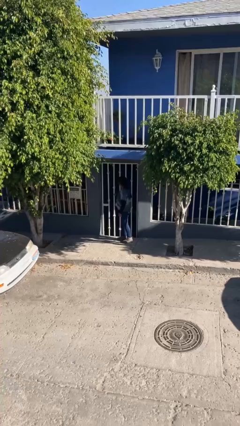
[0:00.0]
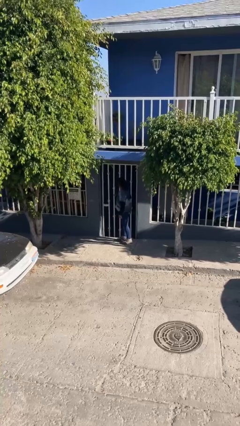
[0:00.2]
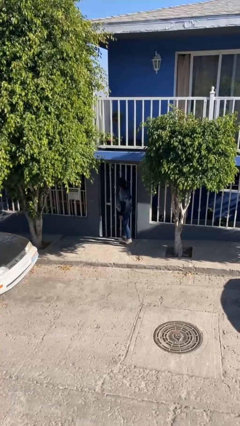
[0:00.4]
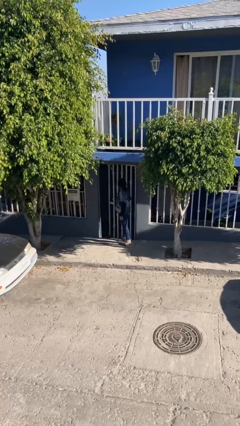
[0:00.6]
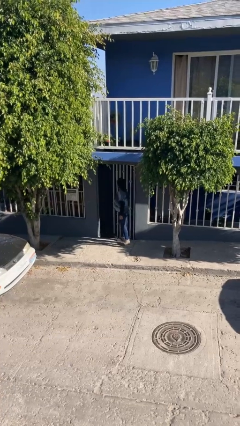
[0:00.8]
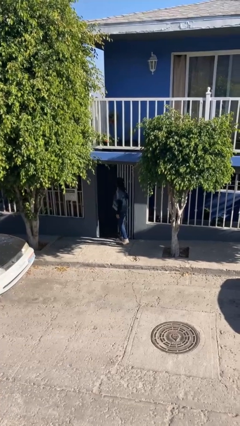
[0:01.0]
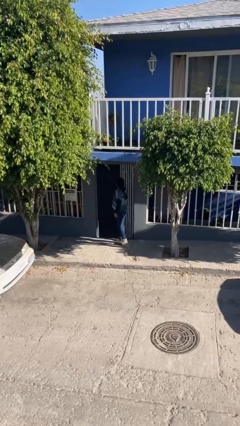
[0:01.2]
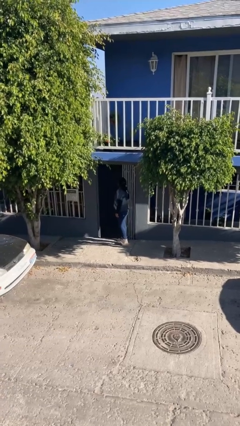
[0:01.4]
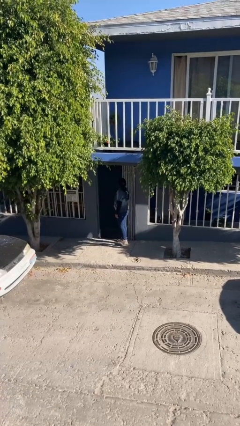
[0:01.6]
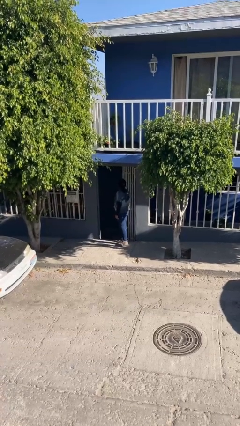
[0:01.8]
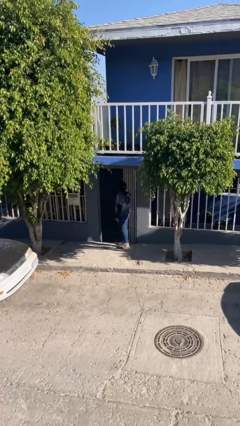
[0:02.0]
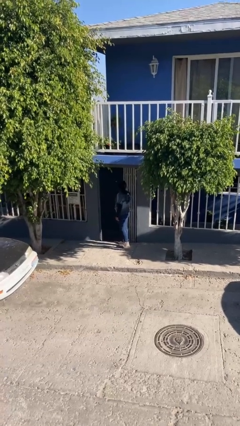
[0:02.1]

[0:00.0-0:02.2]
person opens facility door

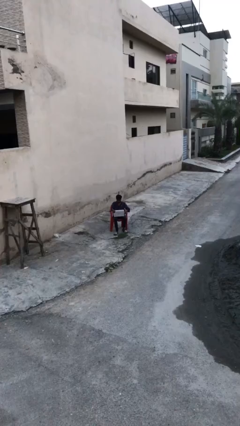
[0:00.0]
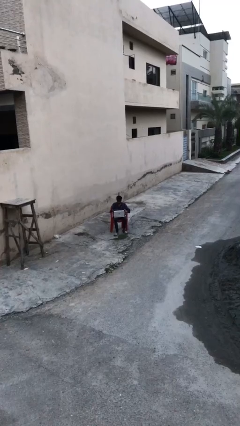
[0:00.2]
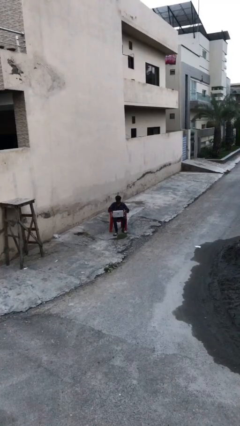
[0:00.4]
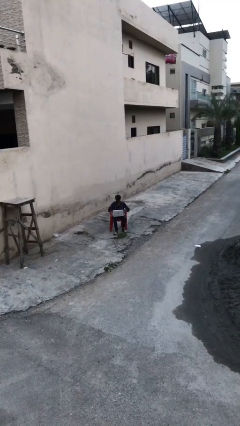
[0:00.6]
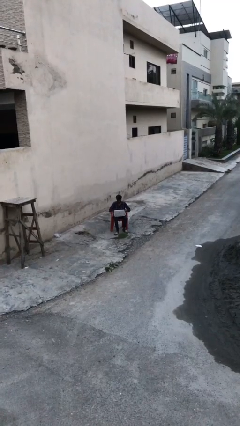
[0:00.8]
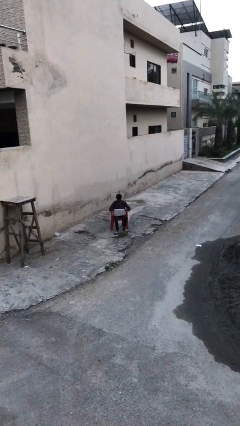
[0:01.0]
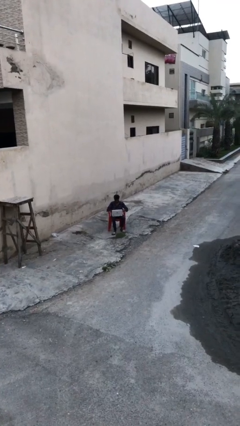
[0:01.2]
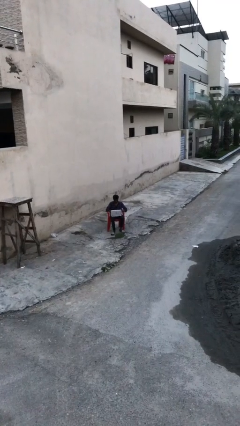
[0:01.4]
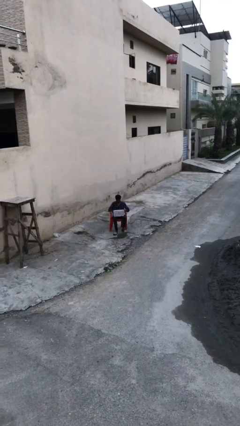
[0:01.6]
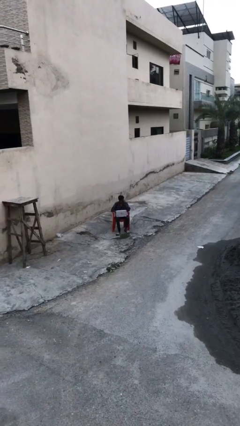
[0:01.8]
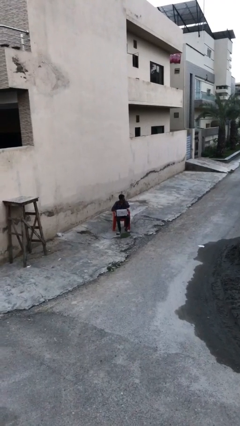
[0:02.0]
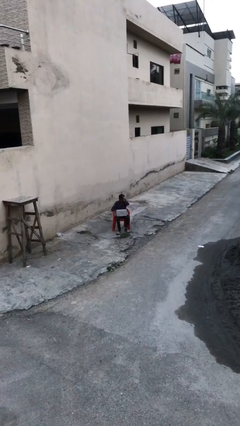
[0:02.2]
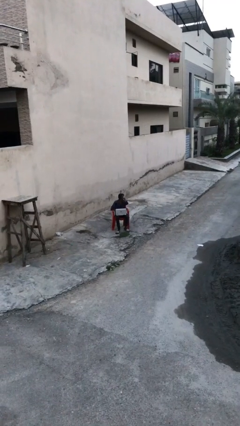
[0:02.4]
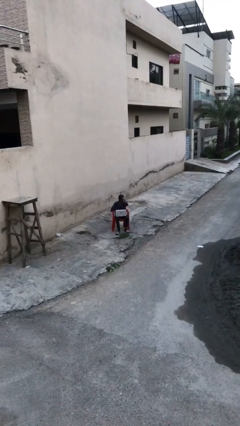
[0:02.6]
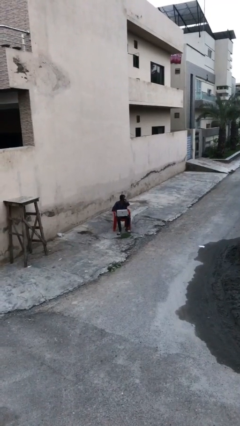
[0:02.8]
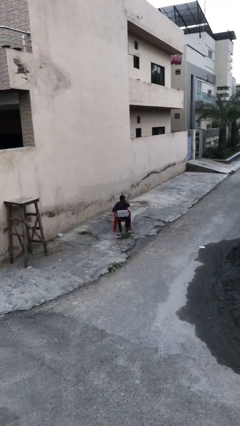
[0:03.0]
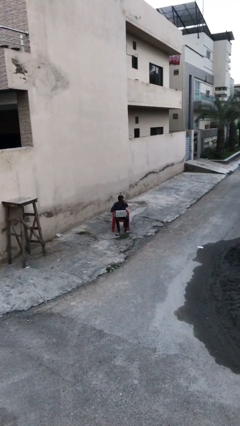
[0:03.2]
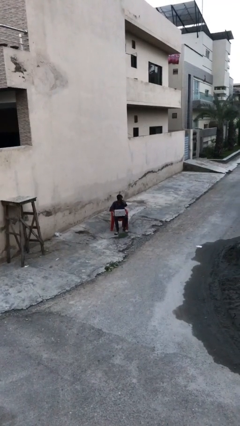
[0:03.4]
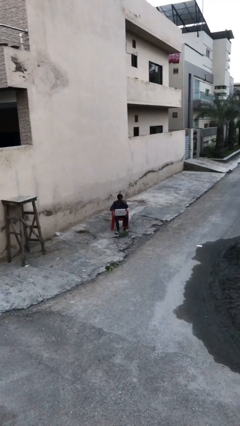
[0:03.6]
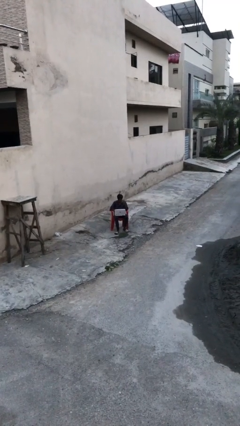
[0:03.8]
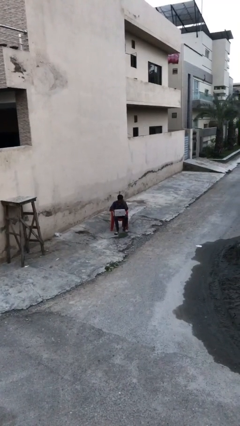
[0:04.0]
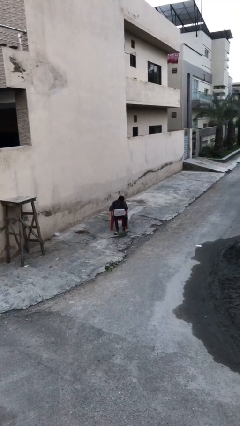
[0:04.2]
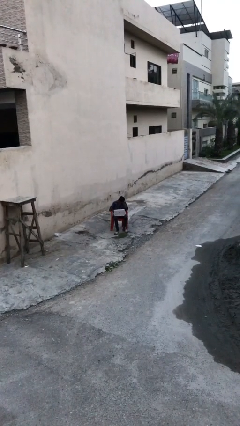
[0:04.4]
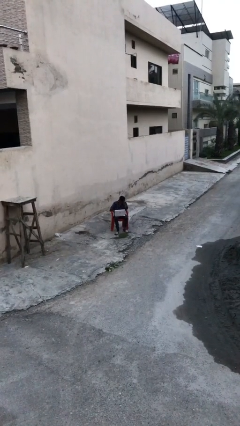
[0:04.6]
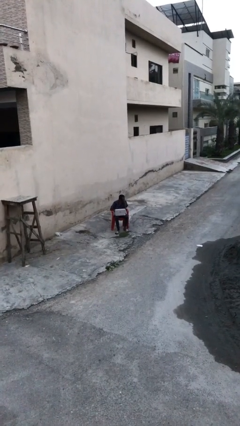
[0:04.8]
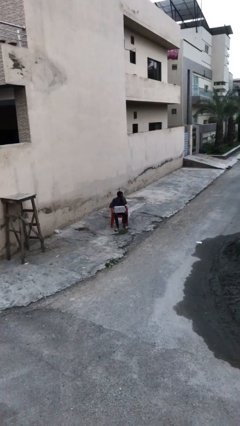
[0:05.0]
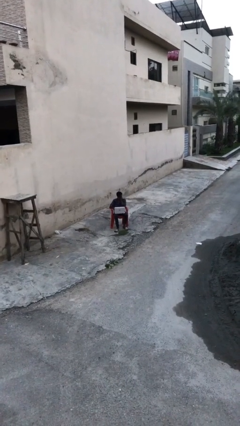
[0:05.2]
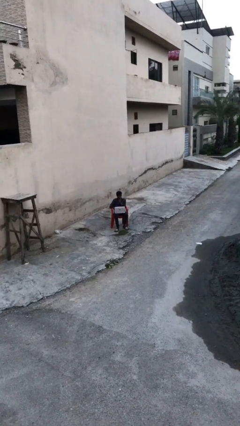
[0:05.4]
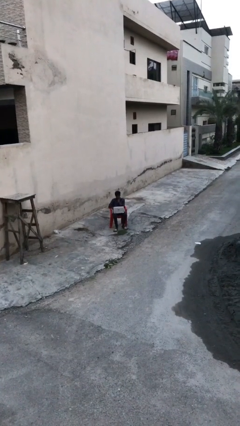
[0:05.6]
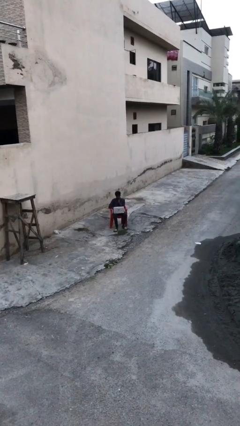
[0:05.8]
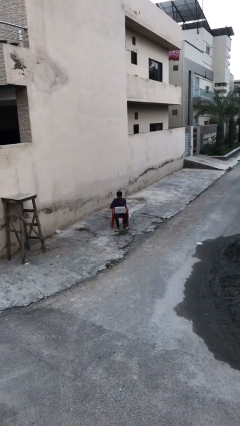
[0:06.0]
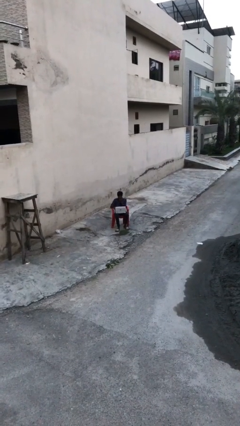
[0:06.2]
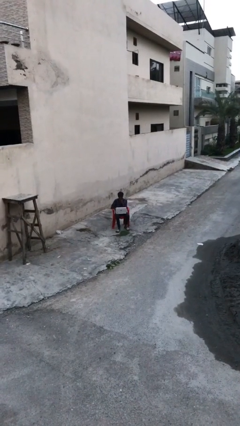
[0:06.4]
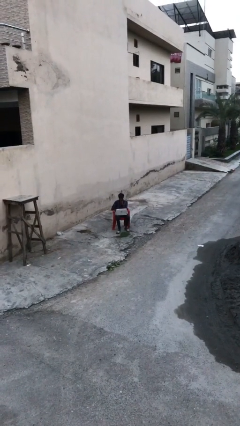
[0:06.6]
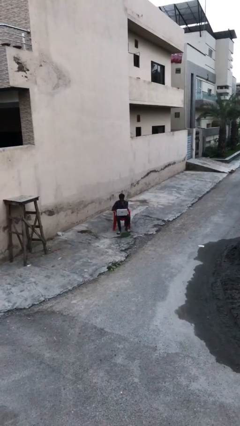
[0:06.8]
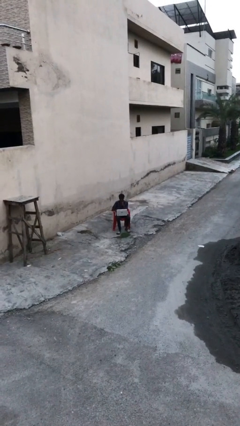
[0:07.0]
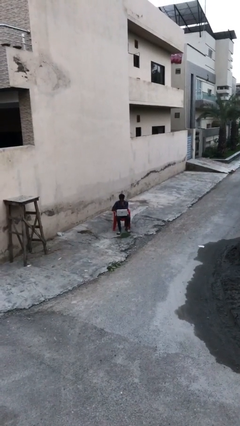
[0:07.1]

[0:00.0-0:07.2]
person interacts with laptop

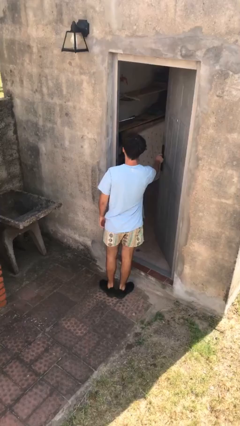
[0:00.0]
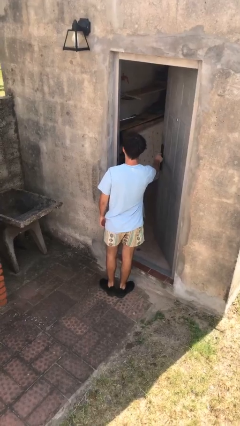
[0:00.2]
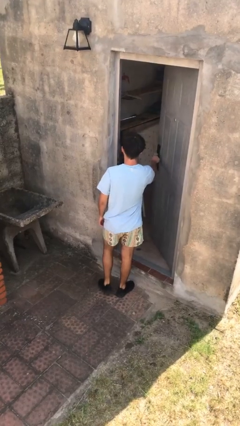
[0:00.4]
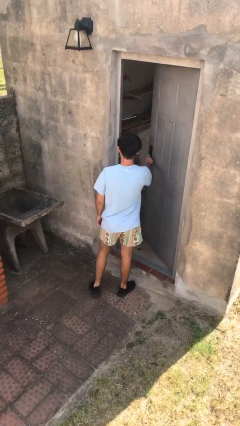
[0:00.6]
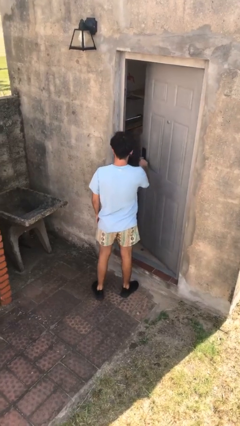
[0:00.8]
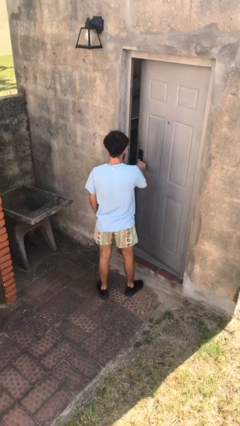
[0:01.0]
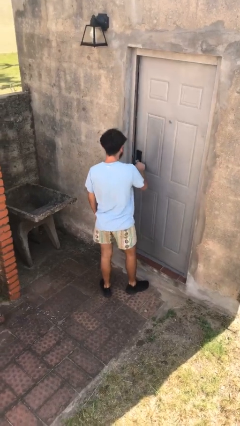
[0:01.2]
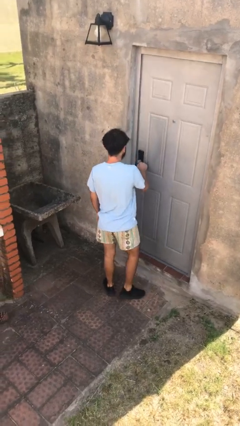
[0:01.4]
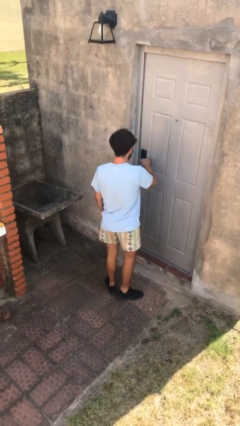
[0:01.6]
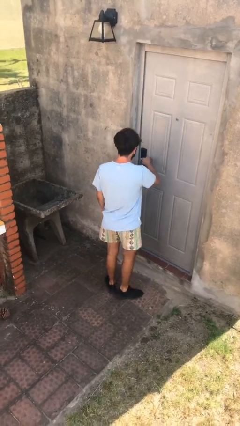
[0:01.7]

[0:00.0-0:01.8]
person closes facility door

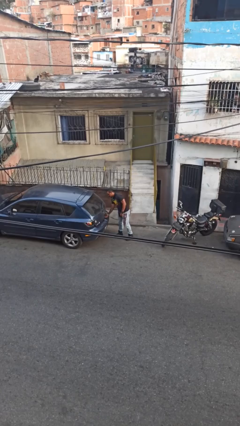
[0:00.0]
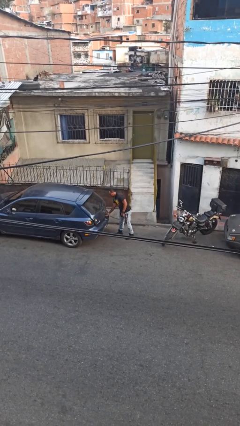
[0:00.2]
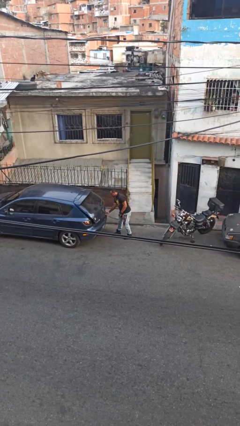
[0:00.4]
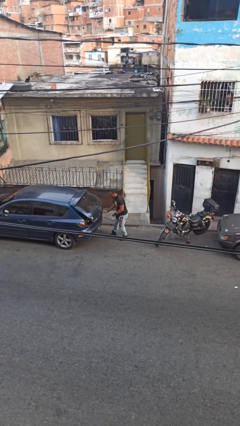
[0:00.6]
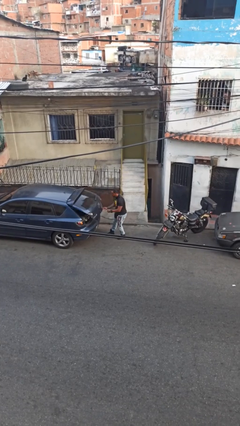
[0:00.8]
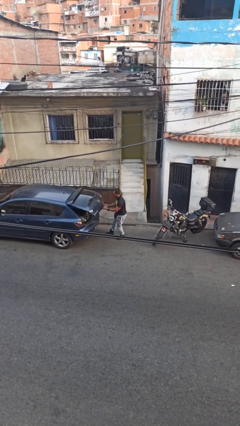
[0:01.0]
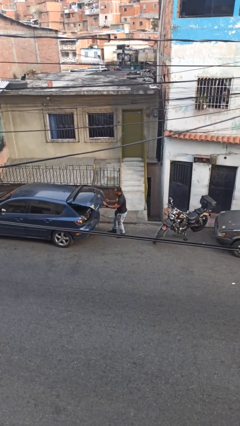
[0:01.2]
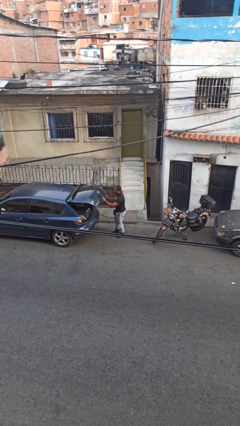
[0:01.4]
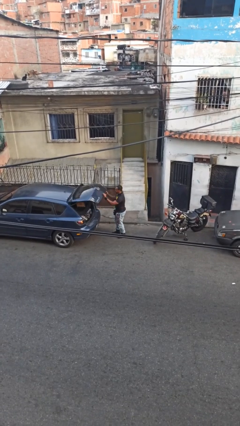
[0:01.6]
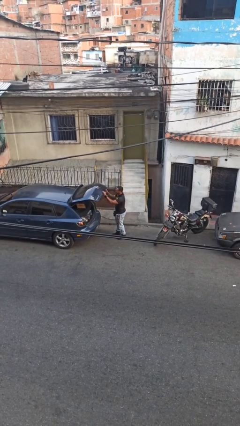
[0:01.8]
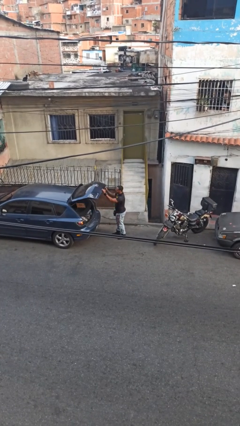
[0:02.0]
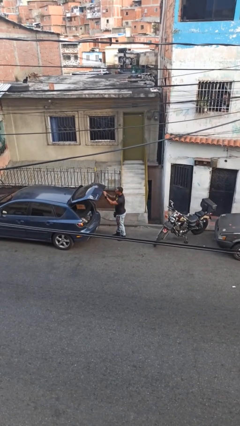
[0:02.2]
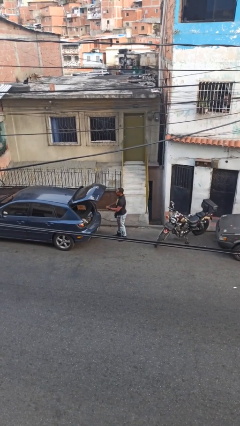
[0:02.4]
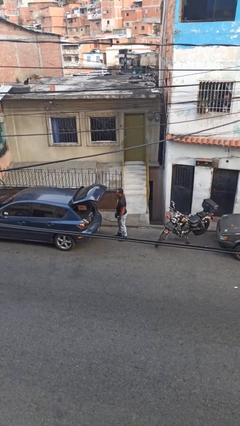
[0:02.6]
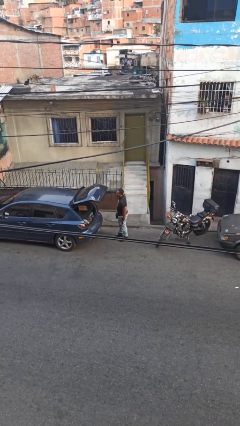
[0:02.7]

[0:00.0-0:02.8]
person opens car trunk

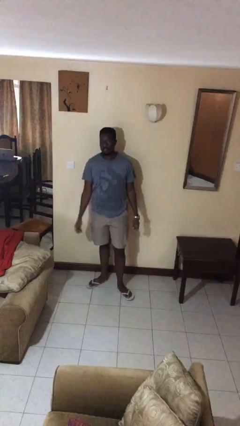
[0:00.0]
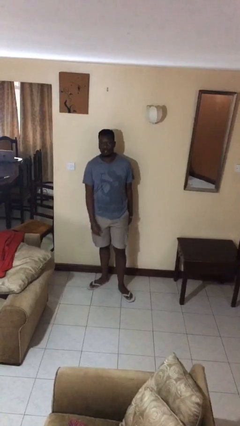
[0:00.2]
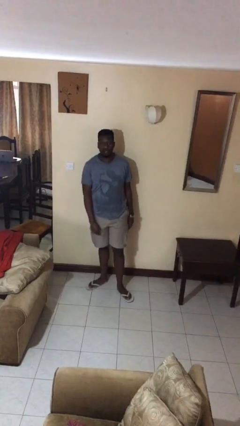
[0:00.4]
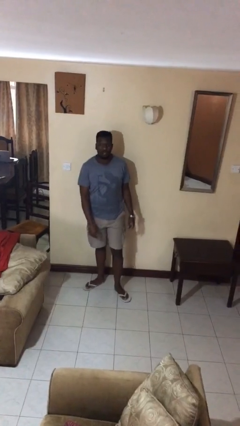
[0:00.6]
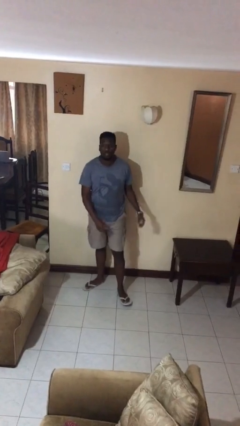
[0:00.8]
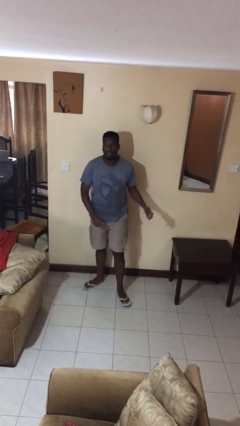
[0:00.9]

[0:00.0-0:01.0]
person dances in place

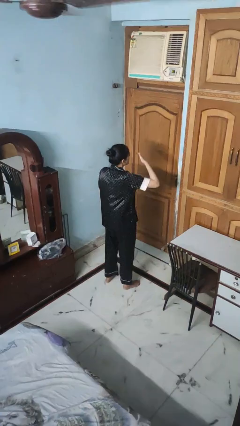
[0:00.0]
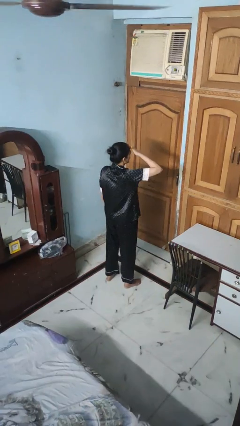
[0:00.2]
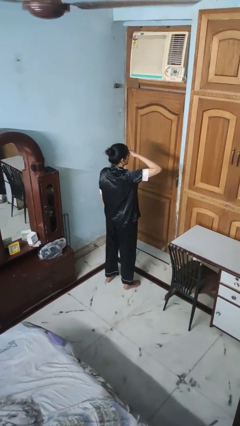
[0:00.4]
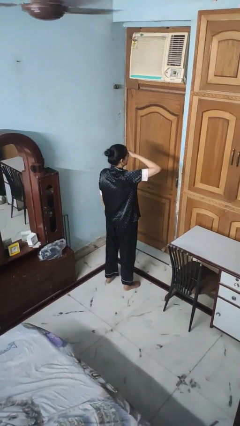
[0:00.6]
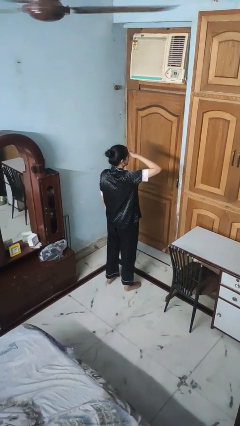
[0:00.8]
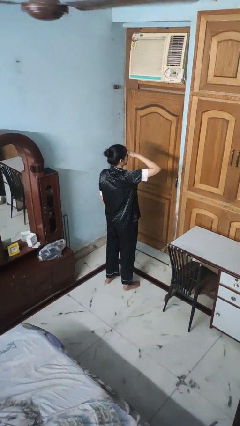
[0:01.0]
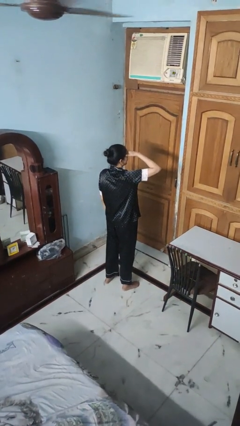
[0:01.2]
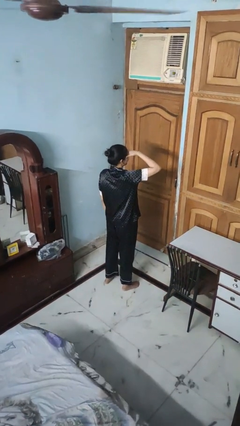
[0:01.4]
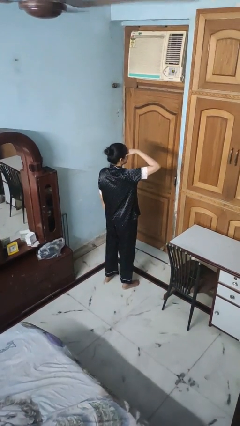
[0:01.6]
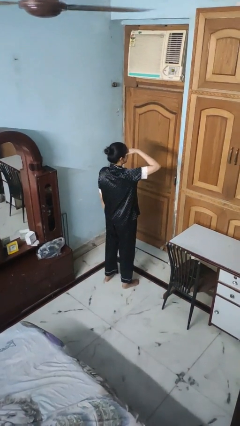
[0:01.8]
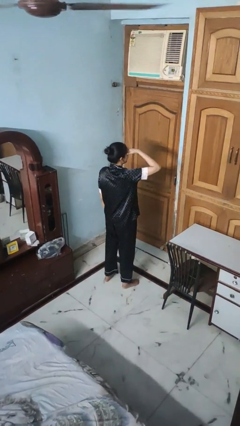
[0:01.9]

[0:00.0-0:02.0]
person shades eyes

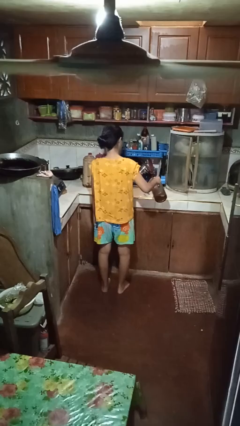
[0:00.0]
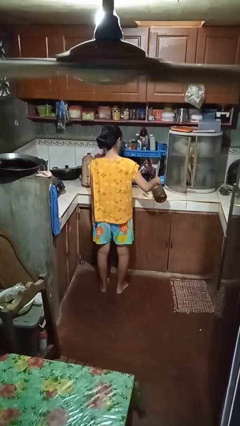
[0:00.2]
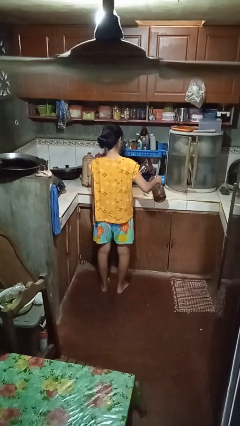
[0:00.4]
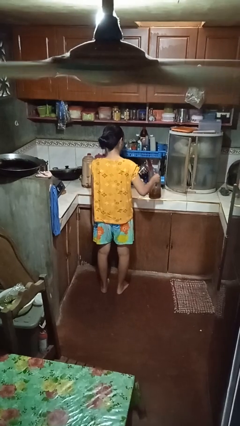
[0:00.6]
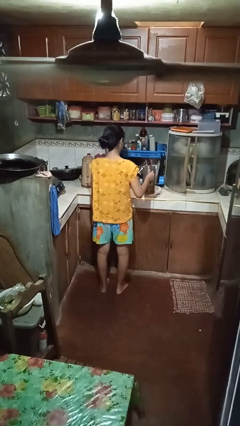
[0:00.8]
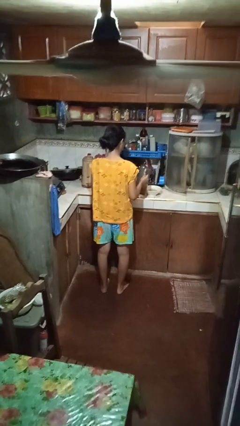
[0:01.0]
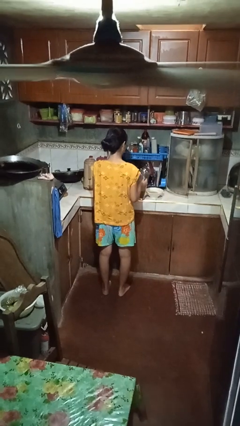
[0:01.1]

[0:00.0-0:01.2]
person pours into bowl
